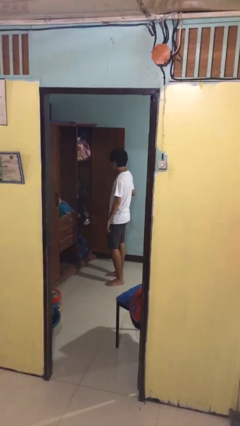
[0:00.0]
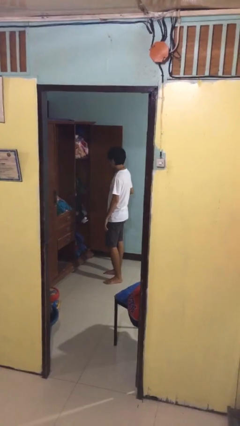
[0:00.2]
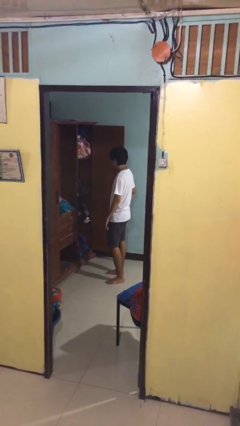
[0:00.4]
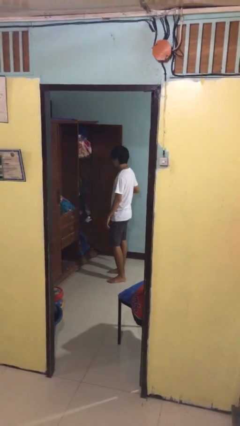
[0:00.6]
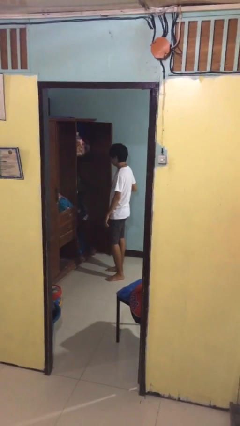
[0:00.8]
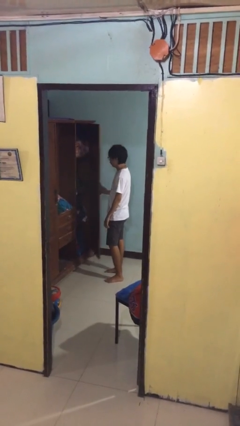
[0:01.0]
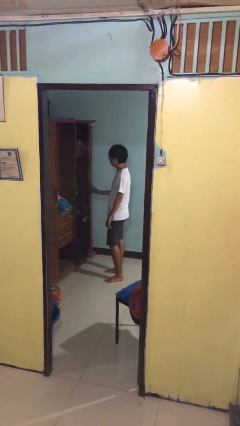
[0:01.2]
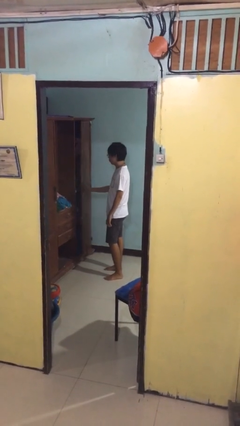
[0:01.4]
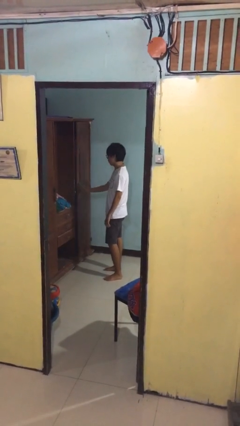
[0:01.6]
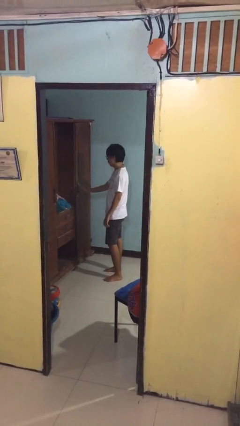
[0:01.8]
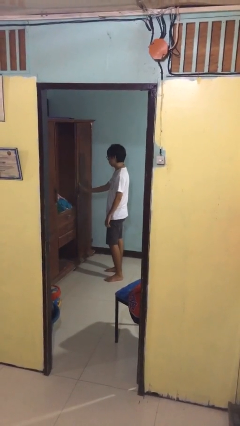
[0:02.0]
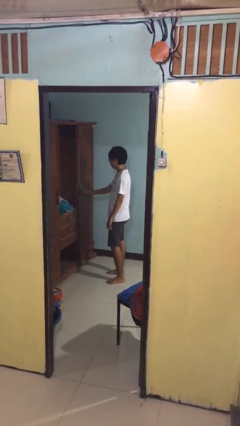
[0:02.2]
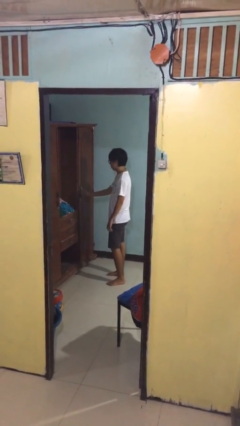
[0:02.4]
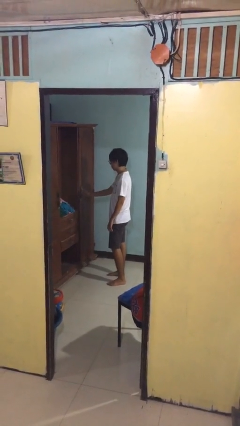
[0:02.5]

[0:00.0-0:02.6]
person closes closet door

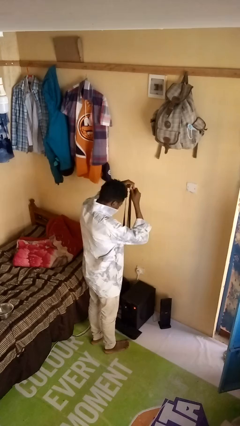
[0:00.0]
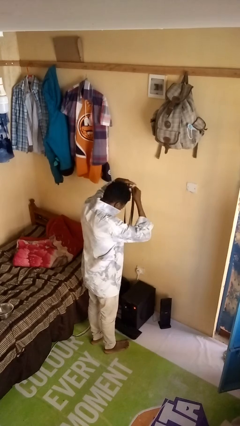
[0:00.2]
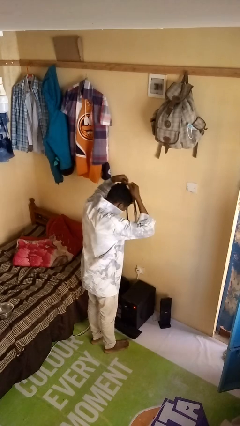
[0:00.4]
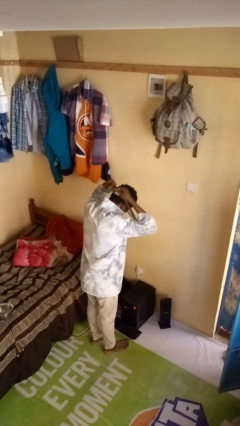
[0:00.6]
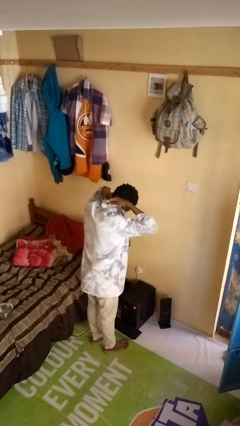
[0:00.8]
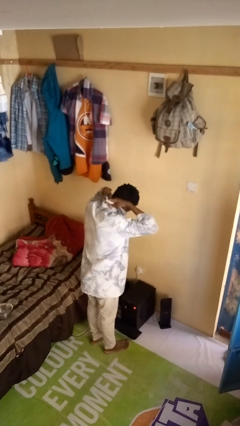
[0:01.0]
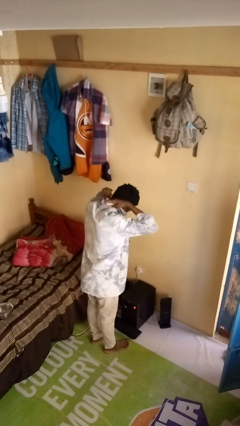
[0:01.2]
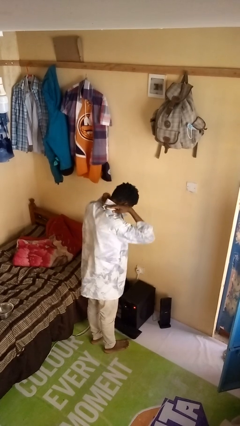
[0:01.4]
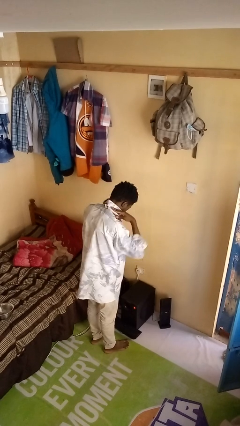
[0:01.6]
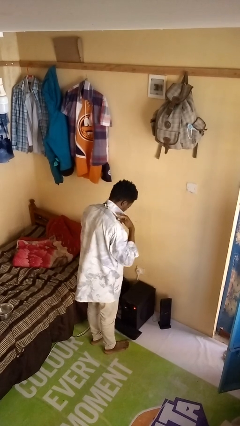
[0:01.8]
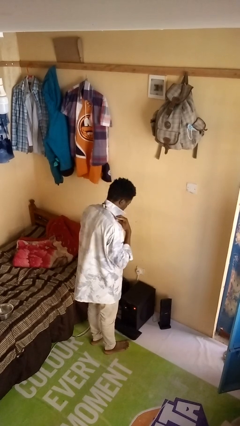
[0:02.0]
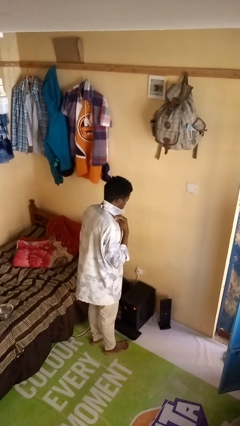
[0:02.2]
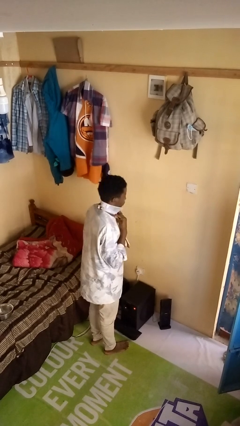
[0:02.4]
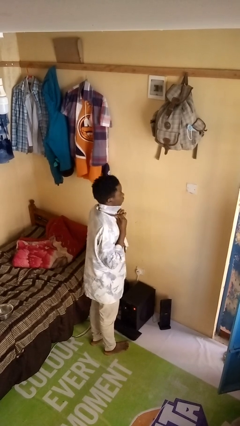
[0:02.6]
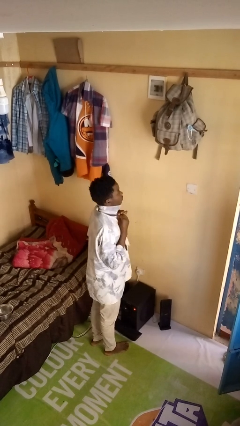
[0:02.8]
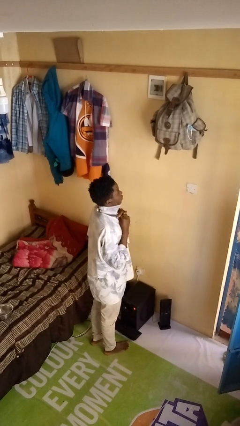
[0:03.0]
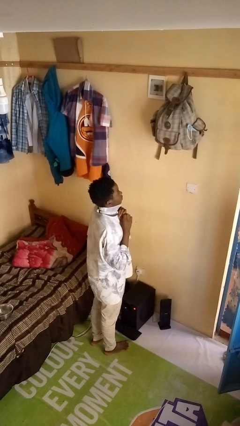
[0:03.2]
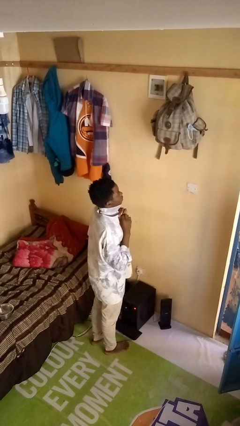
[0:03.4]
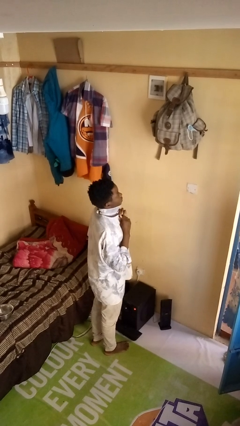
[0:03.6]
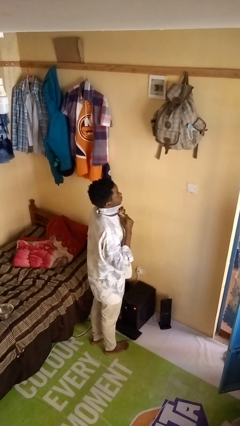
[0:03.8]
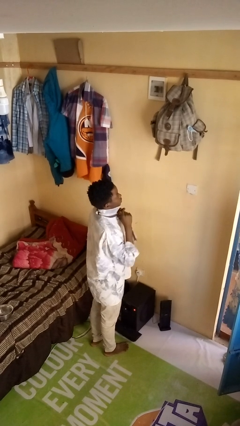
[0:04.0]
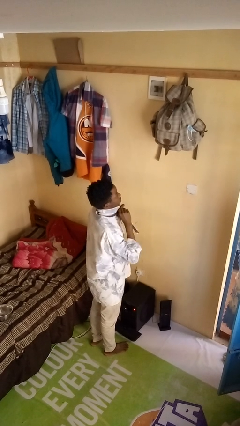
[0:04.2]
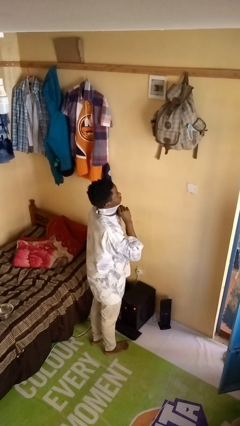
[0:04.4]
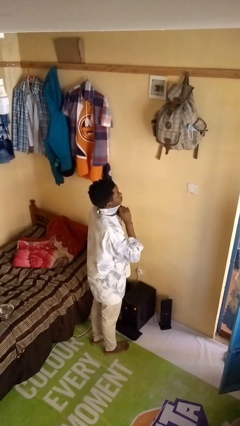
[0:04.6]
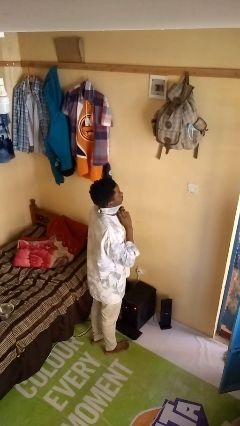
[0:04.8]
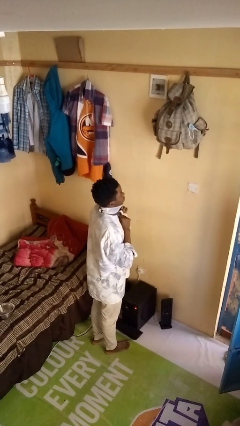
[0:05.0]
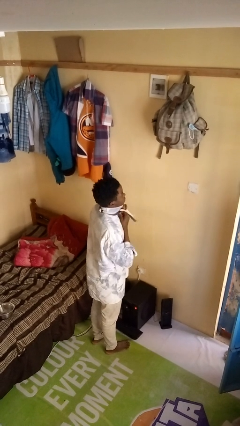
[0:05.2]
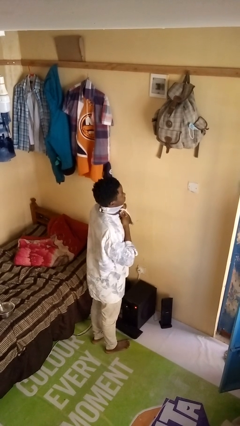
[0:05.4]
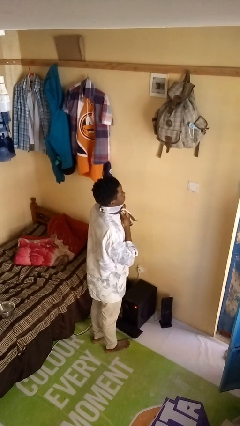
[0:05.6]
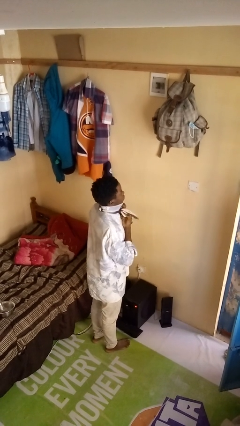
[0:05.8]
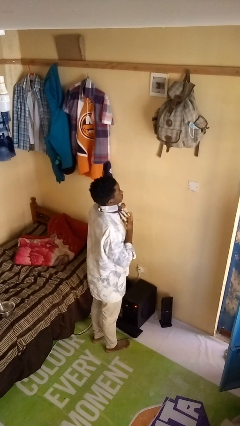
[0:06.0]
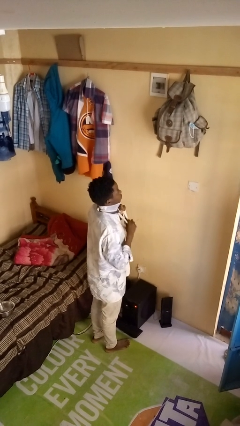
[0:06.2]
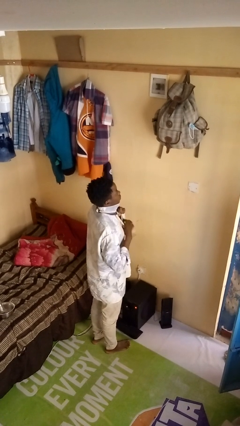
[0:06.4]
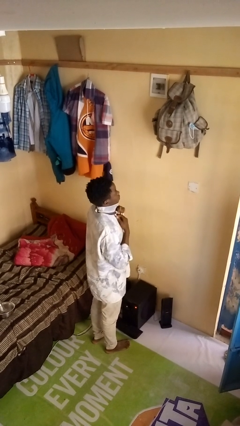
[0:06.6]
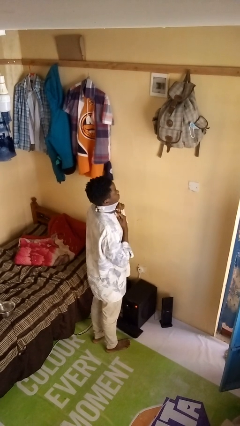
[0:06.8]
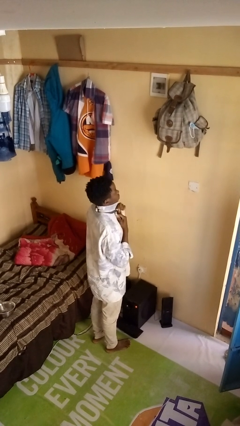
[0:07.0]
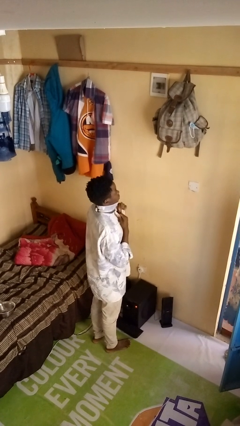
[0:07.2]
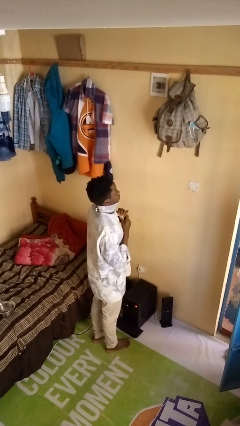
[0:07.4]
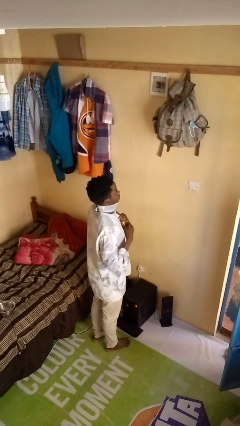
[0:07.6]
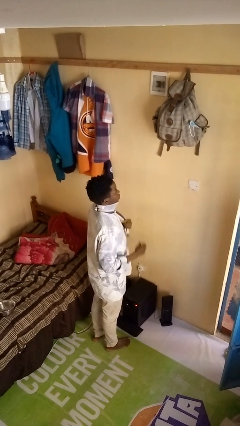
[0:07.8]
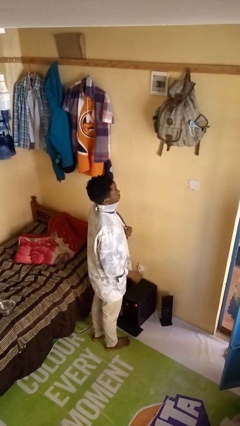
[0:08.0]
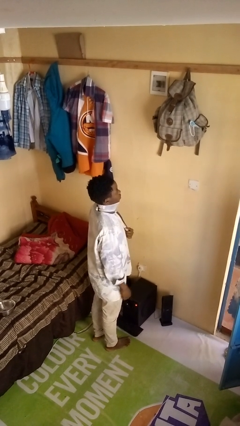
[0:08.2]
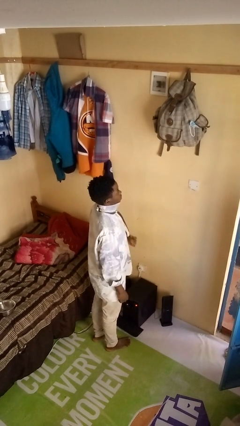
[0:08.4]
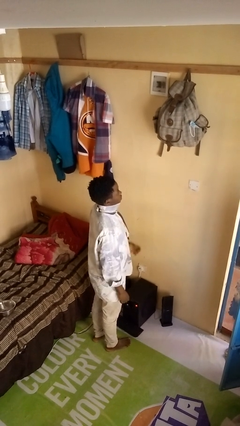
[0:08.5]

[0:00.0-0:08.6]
person puts on necktie

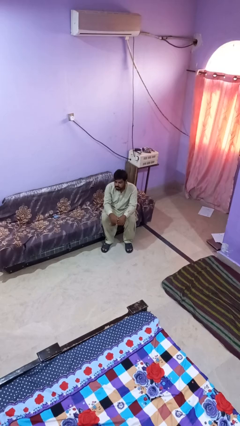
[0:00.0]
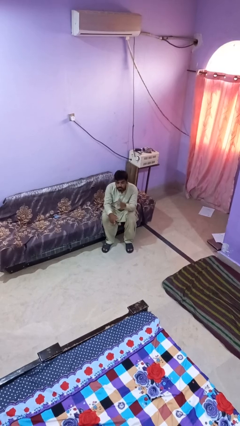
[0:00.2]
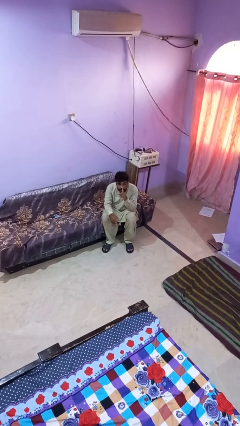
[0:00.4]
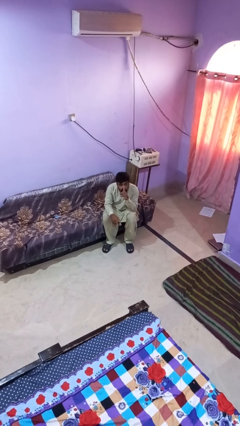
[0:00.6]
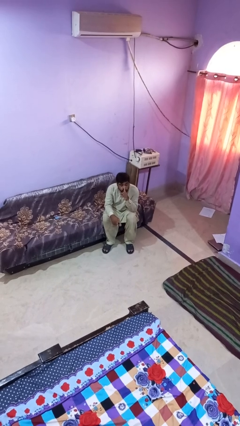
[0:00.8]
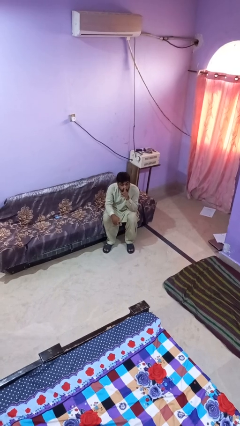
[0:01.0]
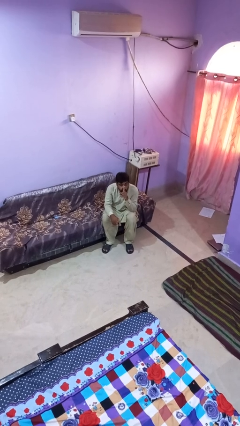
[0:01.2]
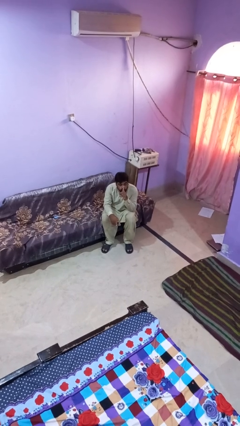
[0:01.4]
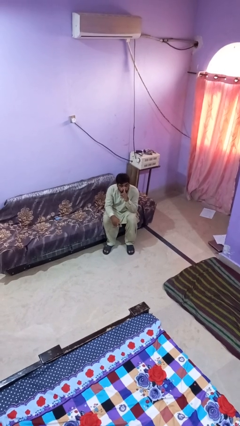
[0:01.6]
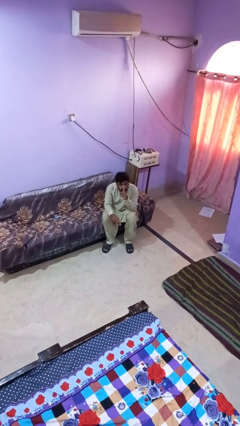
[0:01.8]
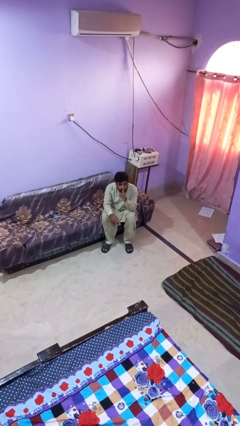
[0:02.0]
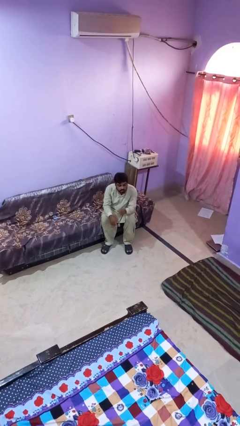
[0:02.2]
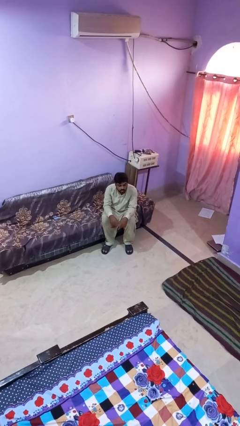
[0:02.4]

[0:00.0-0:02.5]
person gestures be quiet

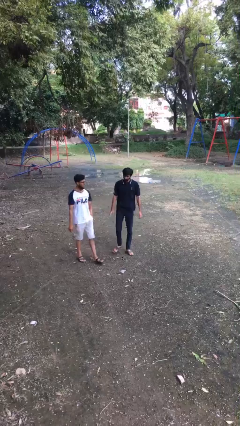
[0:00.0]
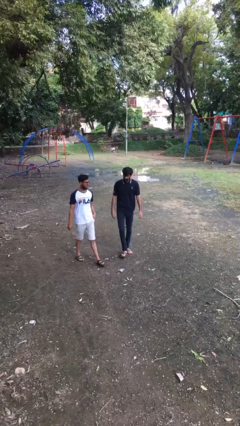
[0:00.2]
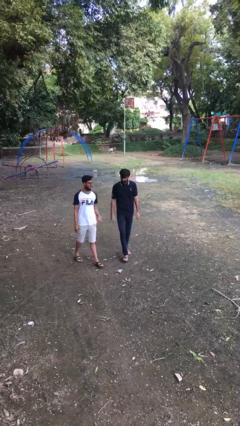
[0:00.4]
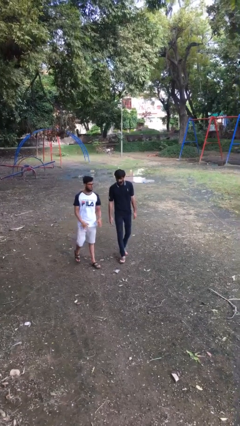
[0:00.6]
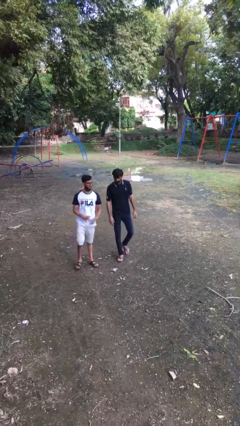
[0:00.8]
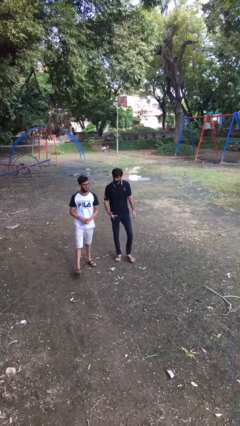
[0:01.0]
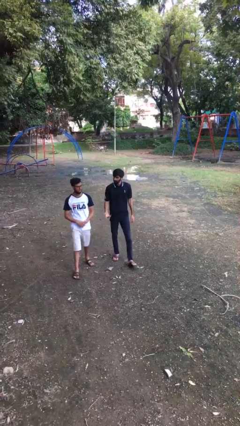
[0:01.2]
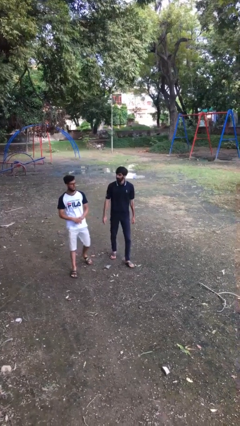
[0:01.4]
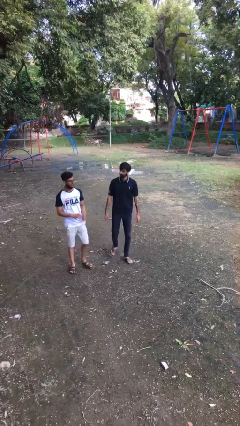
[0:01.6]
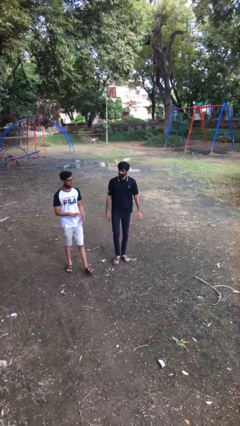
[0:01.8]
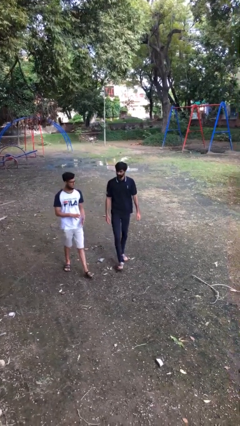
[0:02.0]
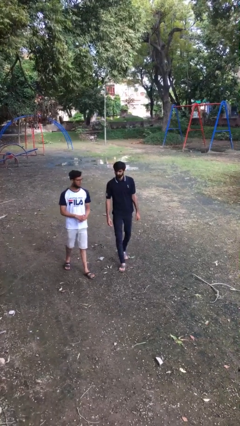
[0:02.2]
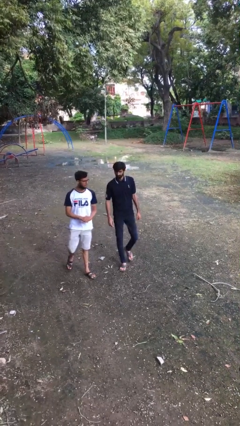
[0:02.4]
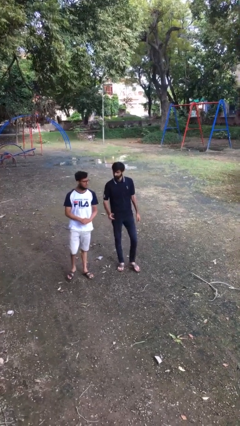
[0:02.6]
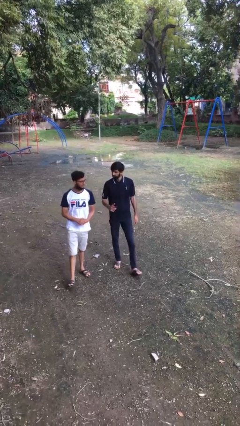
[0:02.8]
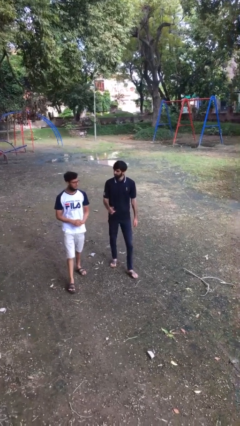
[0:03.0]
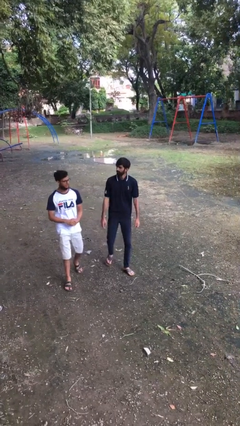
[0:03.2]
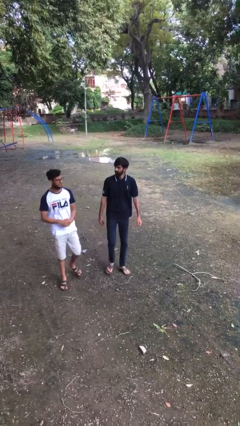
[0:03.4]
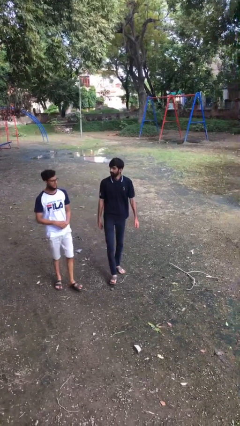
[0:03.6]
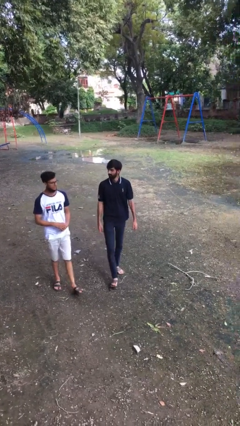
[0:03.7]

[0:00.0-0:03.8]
person talks to person

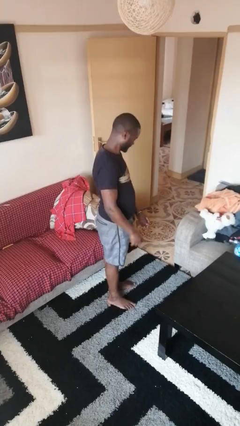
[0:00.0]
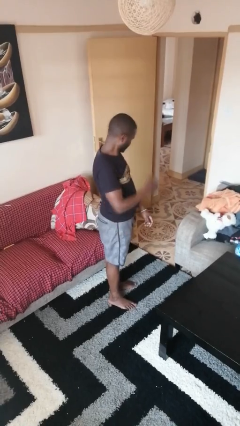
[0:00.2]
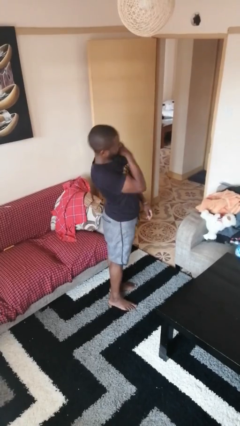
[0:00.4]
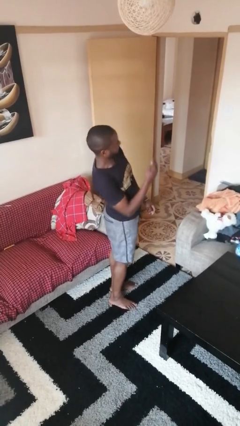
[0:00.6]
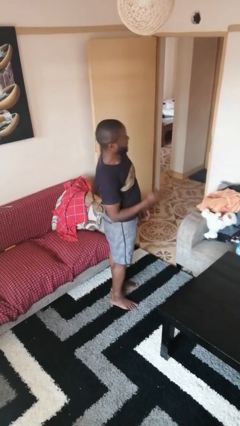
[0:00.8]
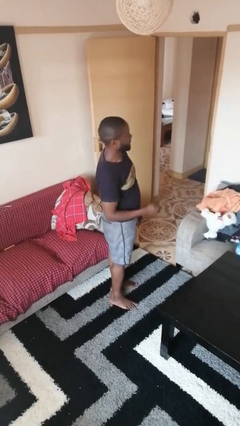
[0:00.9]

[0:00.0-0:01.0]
person swats bug
